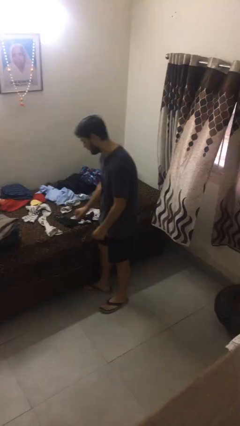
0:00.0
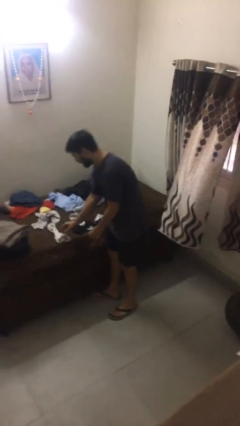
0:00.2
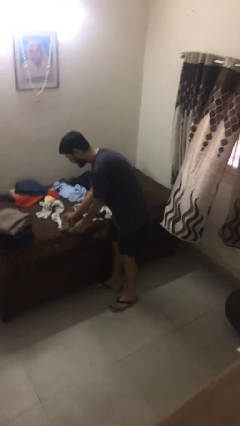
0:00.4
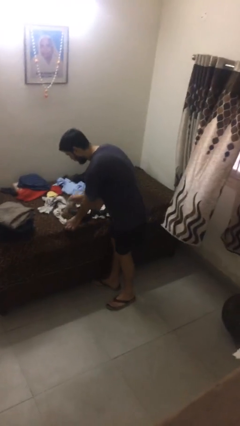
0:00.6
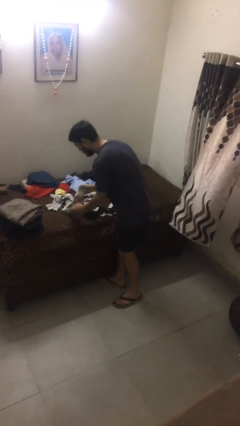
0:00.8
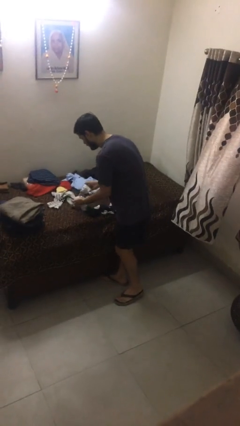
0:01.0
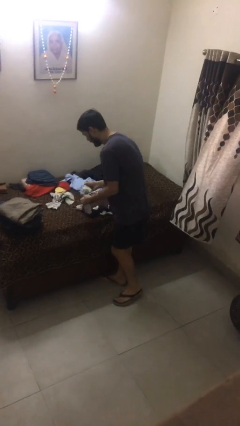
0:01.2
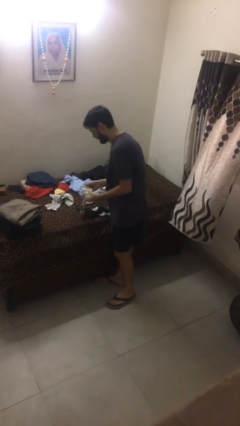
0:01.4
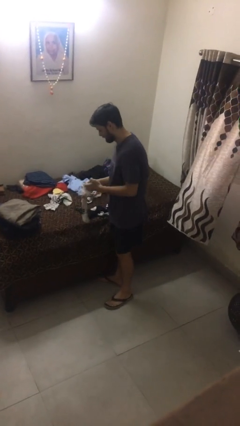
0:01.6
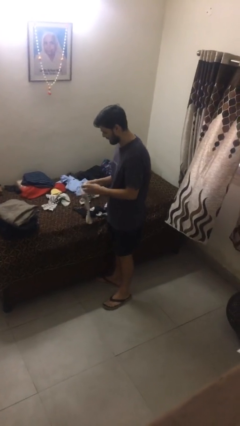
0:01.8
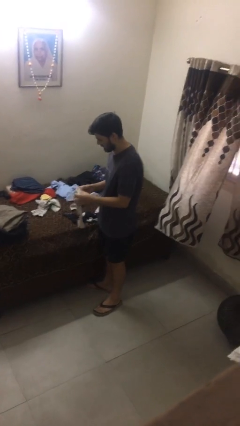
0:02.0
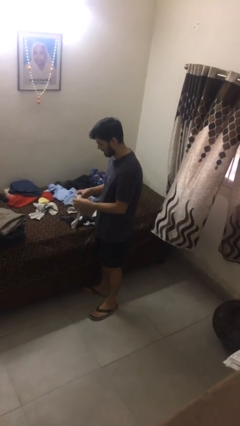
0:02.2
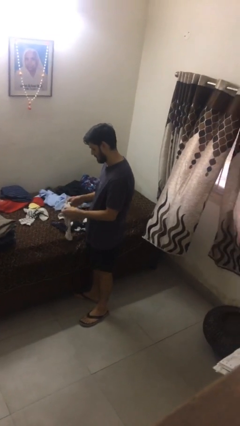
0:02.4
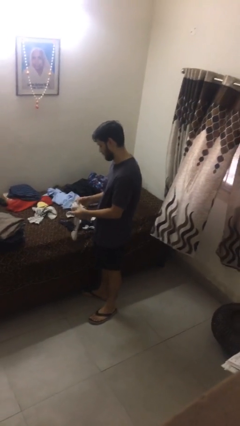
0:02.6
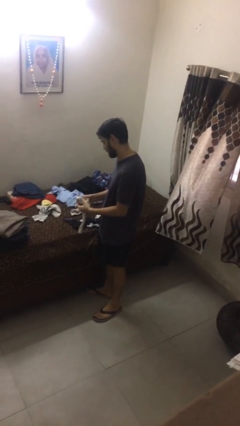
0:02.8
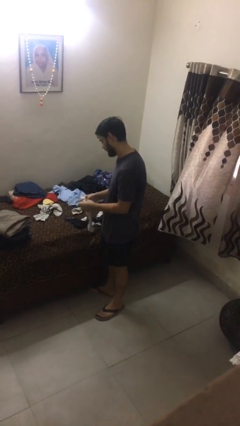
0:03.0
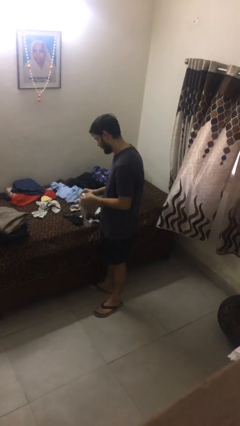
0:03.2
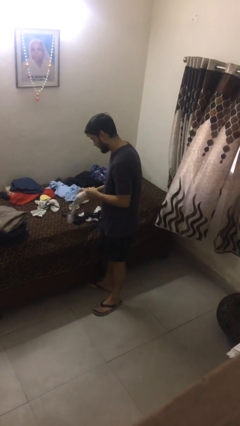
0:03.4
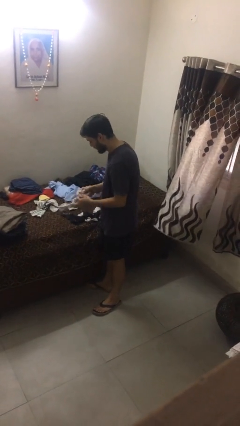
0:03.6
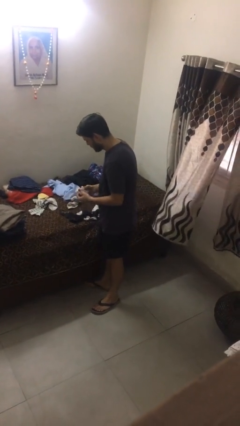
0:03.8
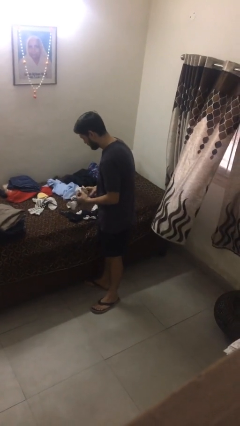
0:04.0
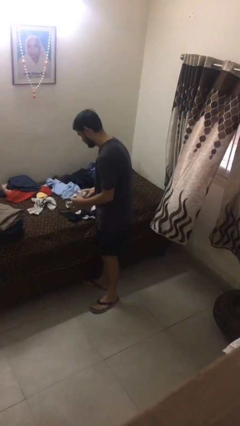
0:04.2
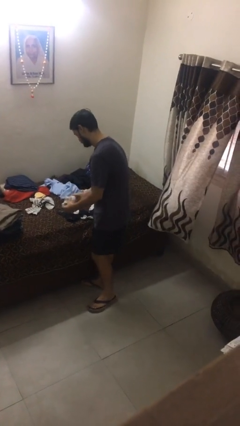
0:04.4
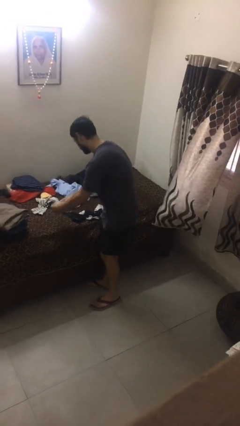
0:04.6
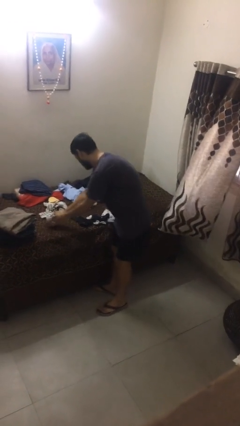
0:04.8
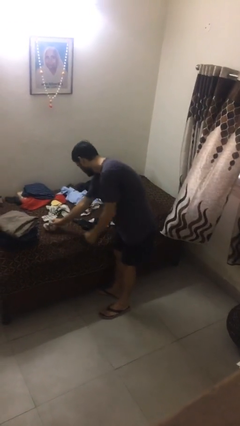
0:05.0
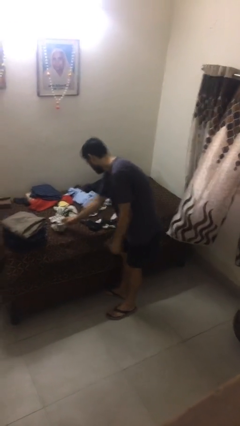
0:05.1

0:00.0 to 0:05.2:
person folds socks

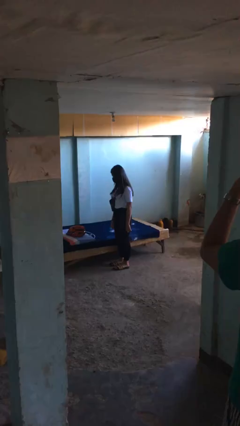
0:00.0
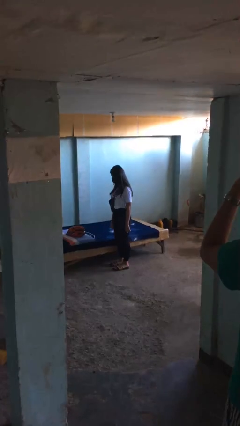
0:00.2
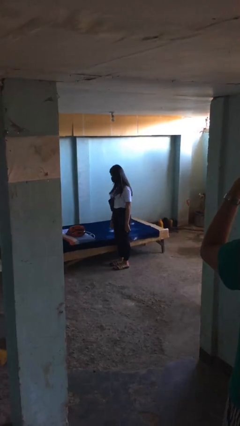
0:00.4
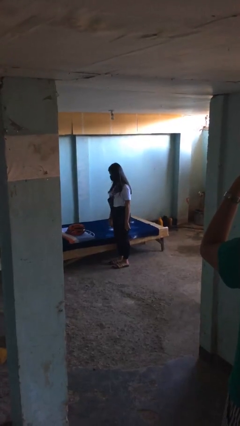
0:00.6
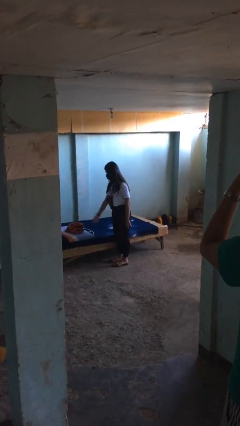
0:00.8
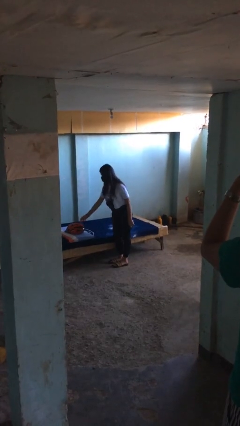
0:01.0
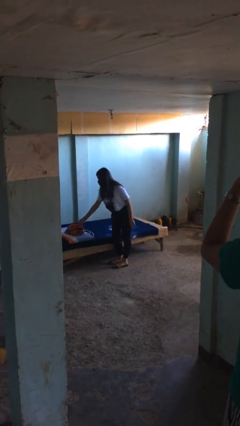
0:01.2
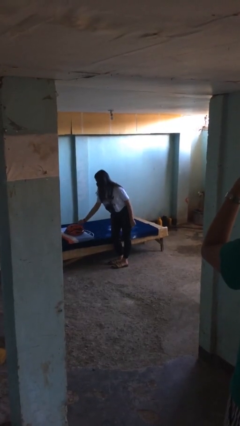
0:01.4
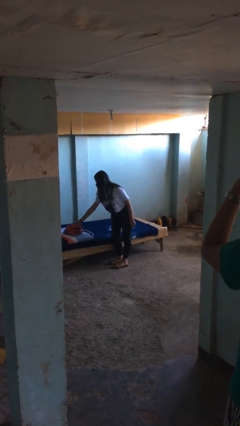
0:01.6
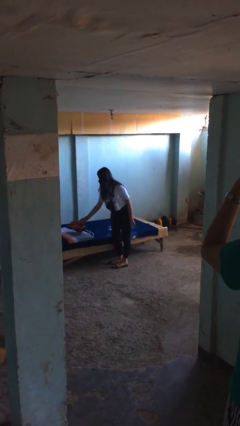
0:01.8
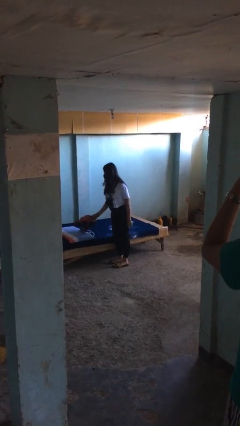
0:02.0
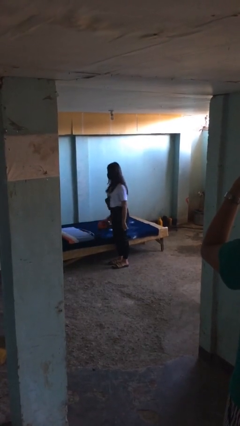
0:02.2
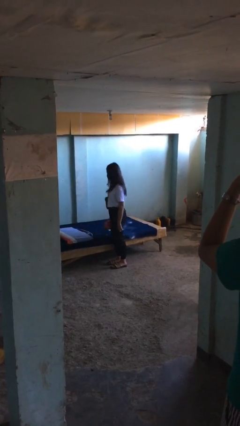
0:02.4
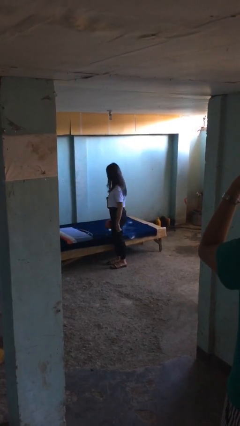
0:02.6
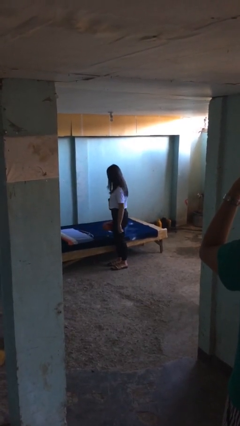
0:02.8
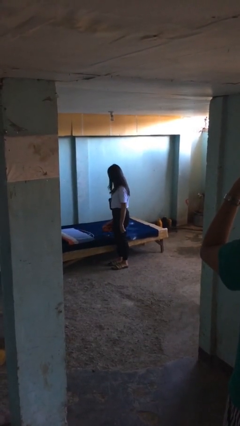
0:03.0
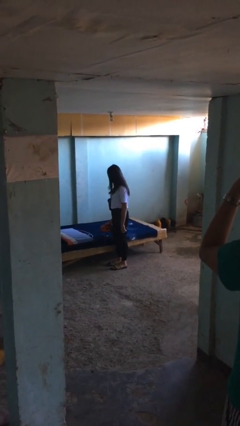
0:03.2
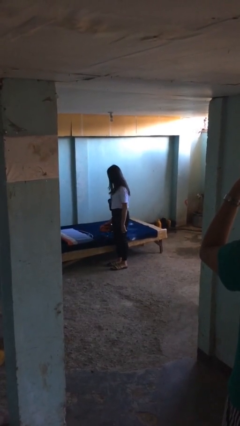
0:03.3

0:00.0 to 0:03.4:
person picks up object from bed

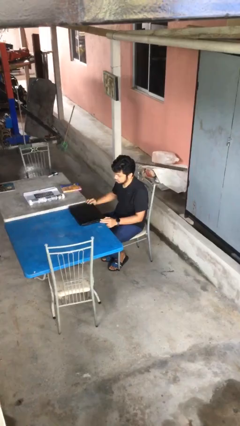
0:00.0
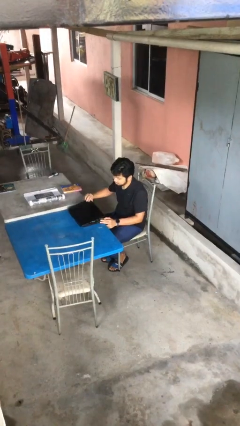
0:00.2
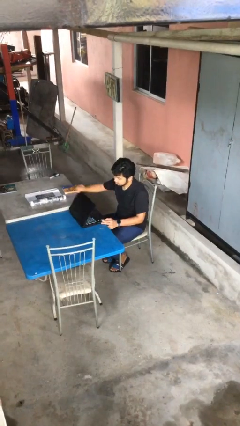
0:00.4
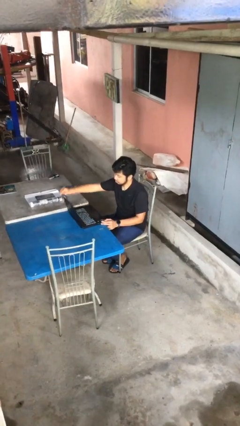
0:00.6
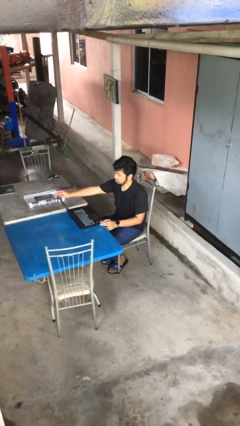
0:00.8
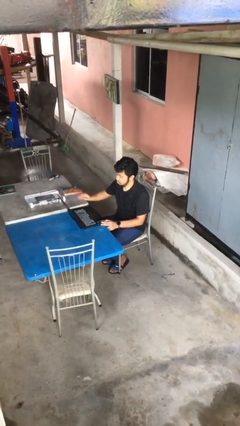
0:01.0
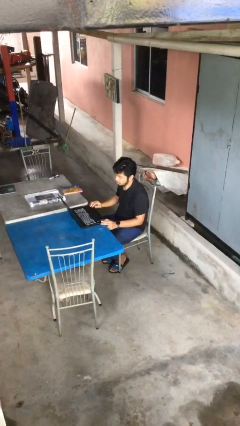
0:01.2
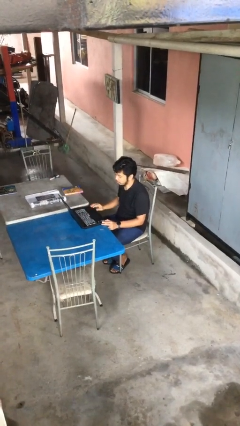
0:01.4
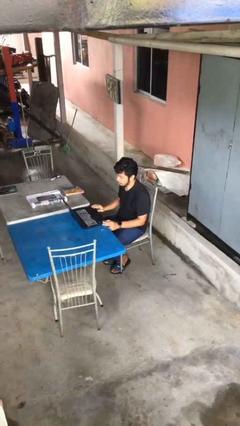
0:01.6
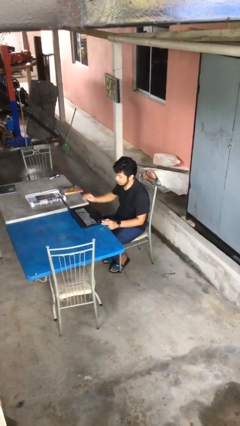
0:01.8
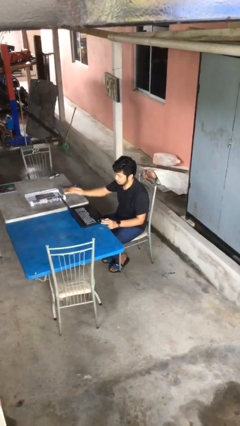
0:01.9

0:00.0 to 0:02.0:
person opens laptop

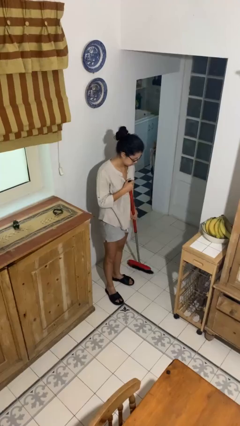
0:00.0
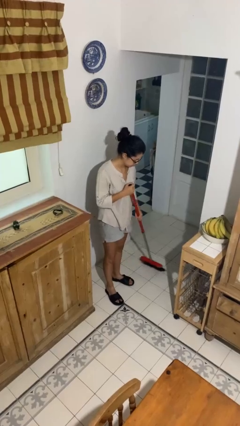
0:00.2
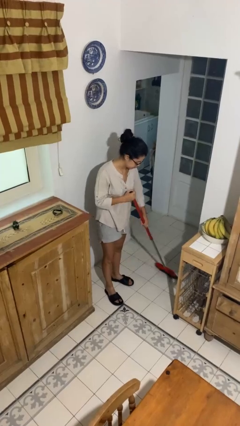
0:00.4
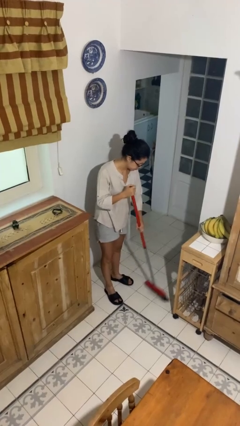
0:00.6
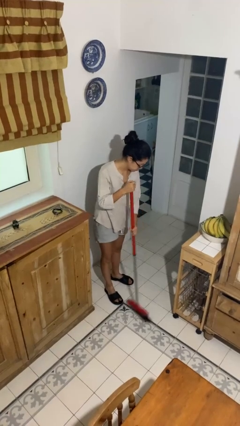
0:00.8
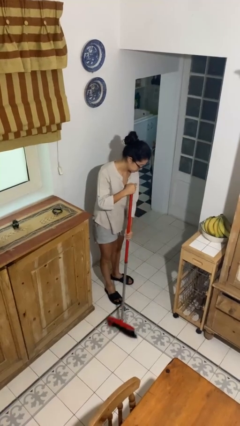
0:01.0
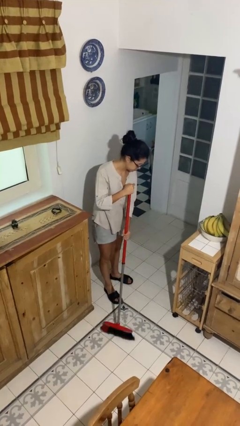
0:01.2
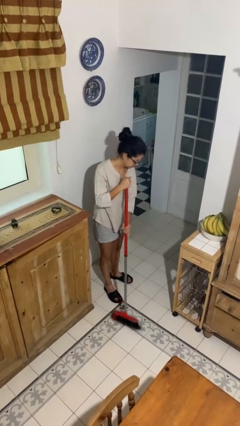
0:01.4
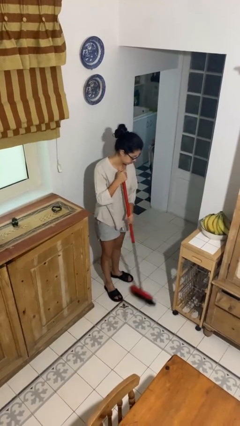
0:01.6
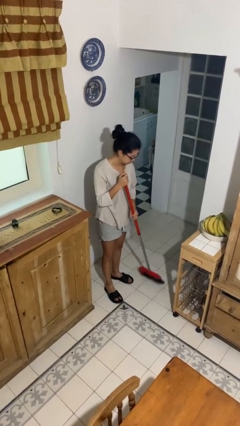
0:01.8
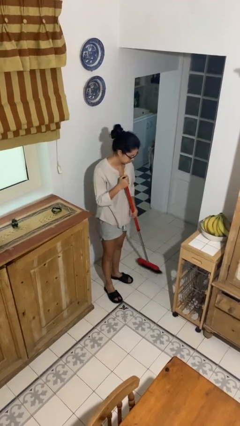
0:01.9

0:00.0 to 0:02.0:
person sweeps floor

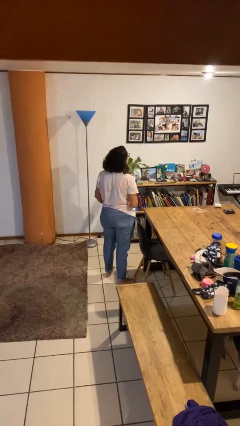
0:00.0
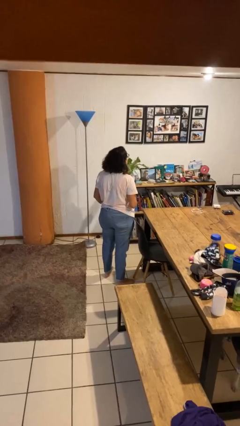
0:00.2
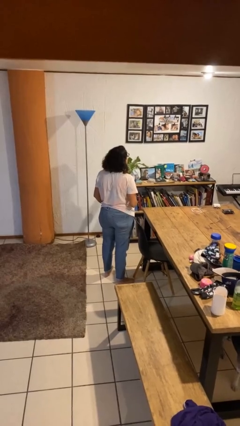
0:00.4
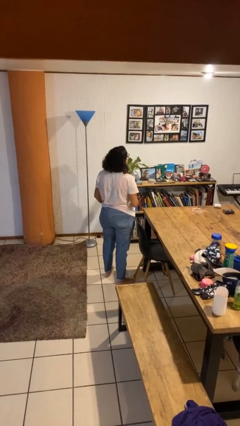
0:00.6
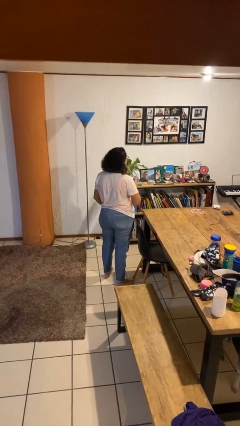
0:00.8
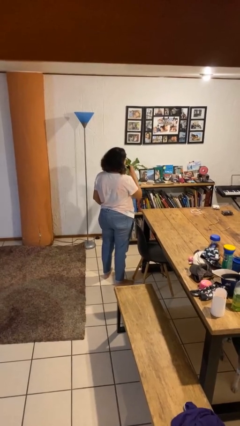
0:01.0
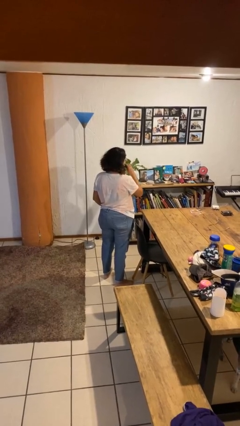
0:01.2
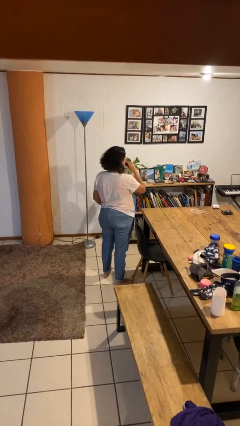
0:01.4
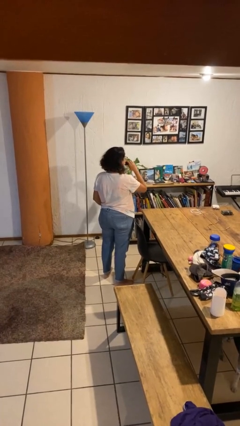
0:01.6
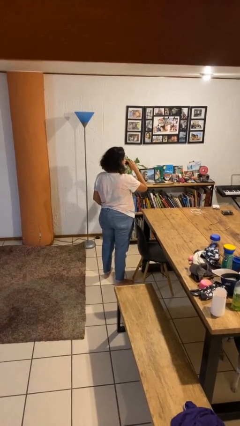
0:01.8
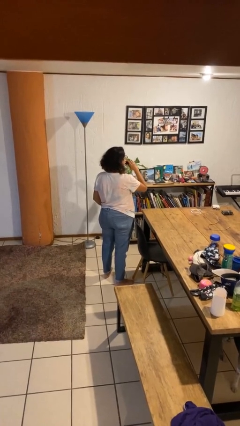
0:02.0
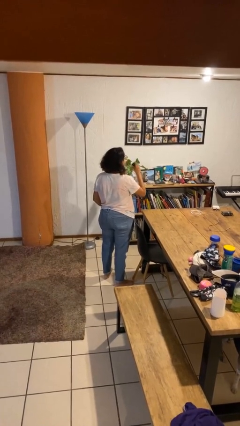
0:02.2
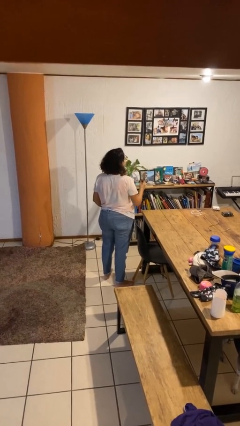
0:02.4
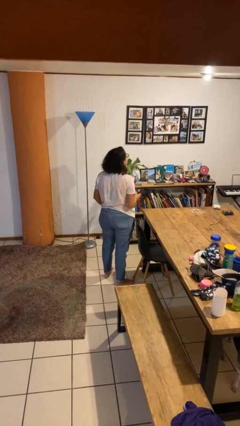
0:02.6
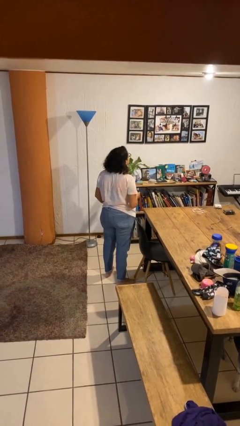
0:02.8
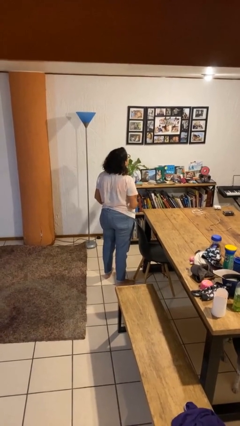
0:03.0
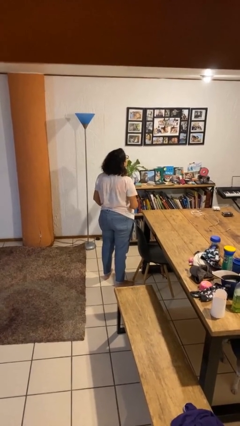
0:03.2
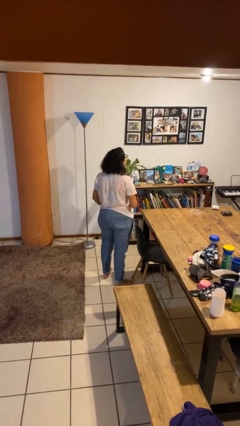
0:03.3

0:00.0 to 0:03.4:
person vapes

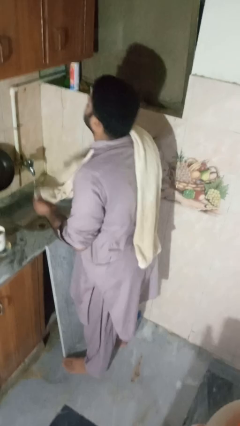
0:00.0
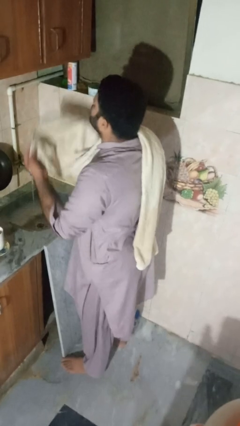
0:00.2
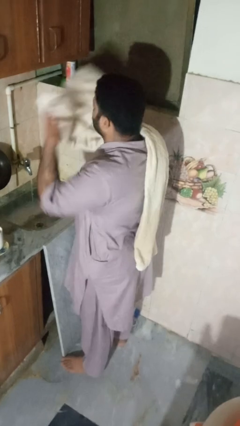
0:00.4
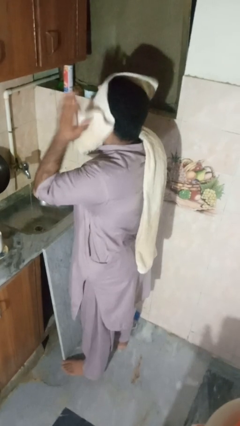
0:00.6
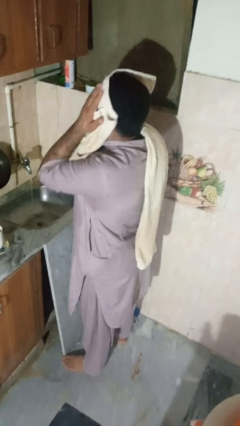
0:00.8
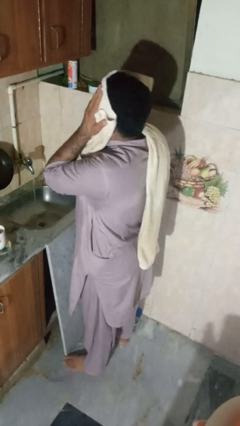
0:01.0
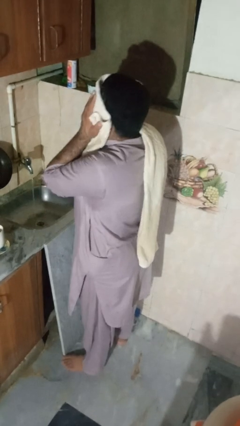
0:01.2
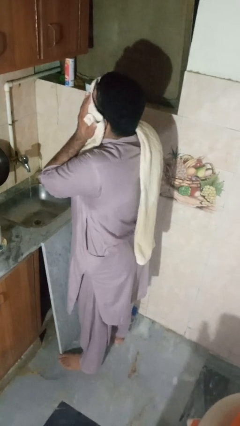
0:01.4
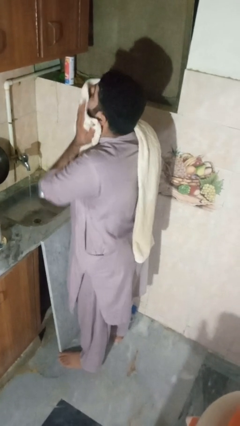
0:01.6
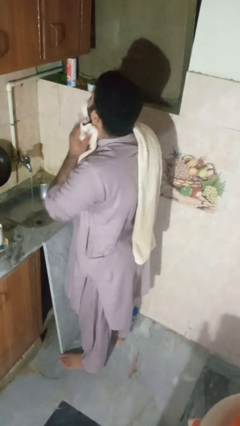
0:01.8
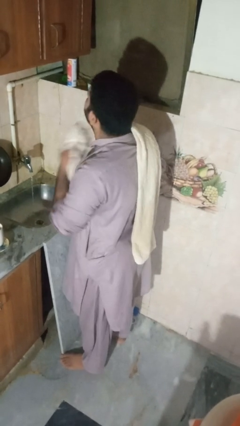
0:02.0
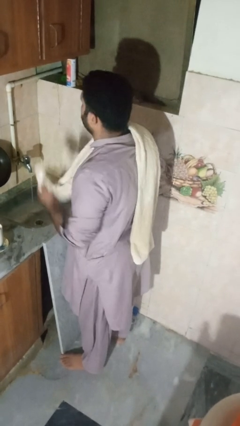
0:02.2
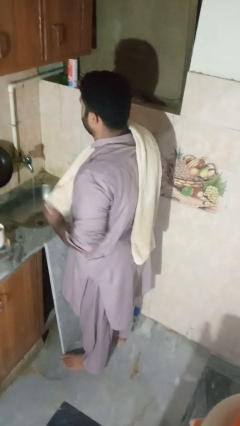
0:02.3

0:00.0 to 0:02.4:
person dries face with towel
